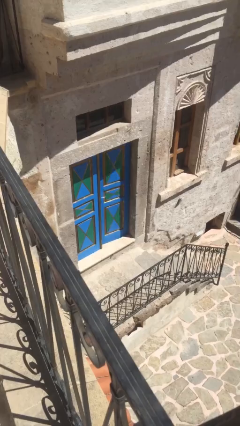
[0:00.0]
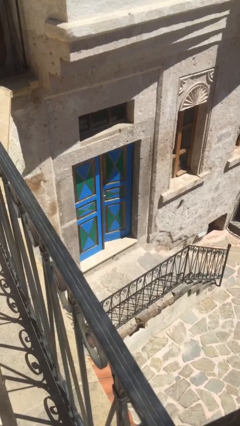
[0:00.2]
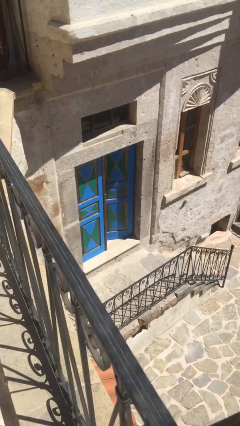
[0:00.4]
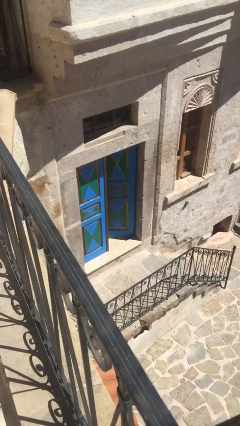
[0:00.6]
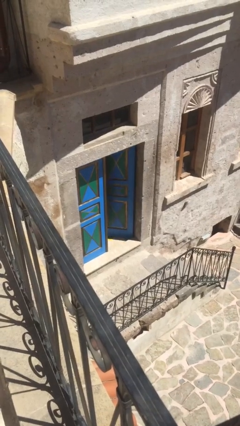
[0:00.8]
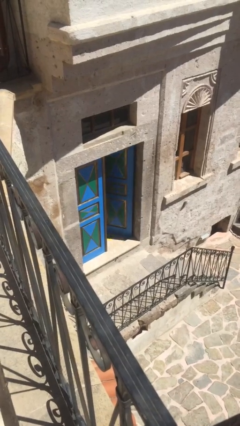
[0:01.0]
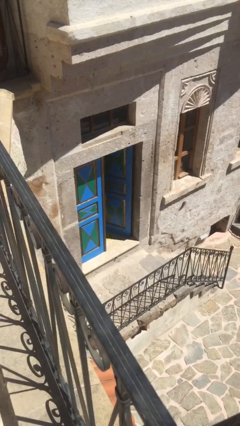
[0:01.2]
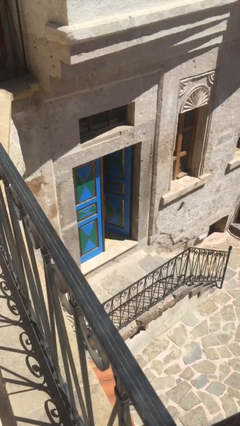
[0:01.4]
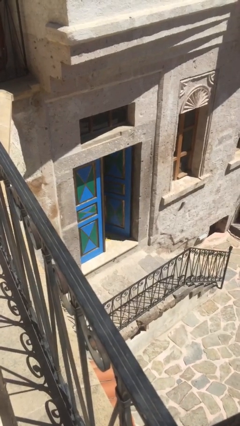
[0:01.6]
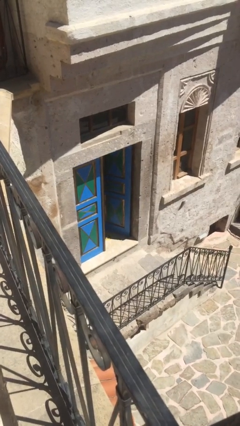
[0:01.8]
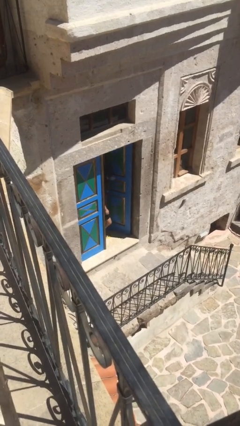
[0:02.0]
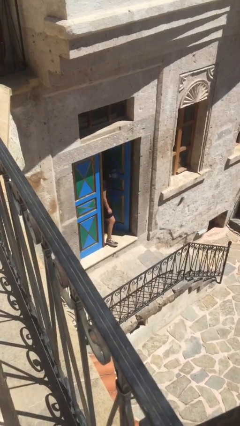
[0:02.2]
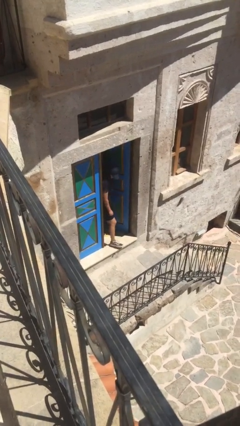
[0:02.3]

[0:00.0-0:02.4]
person opens facility door

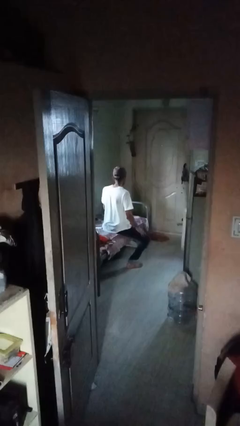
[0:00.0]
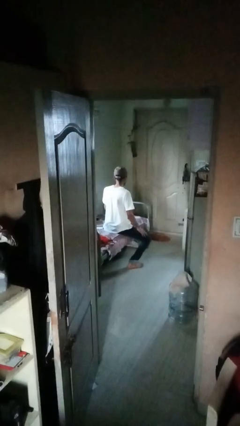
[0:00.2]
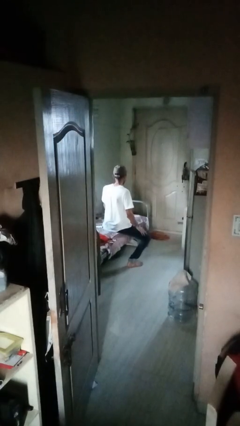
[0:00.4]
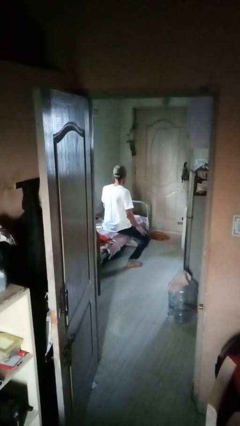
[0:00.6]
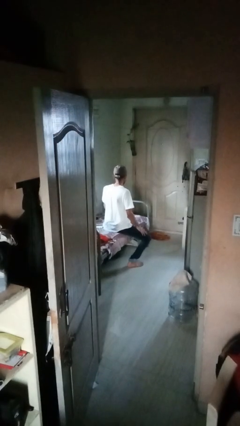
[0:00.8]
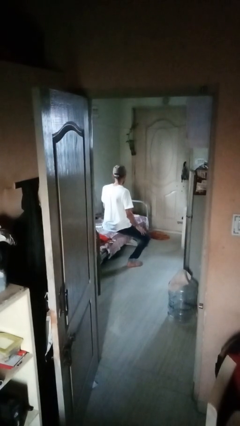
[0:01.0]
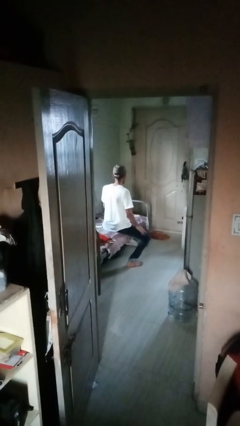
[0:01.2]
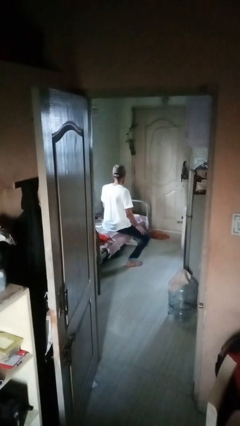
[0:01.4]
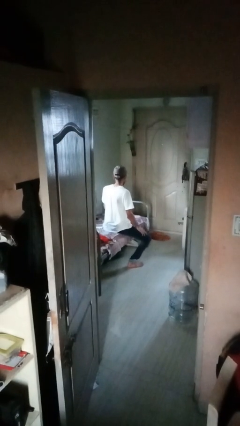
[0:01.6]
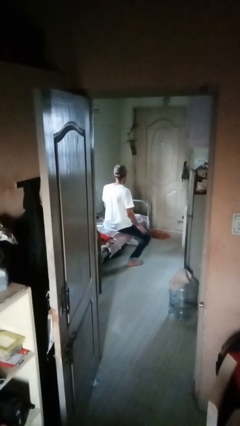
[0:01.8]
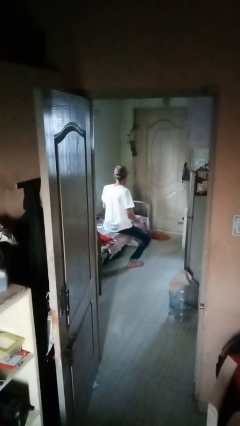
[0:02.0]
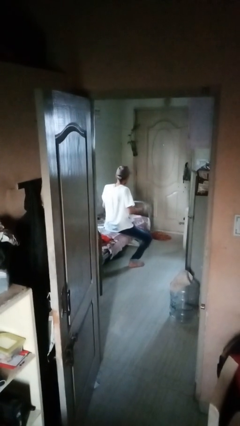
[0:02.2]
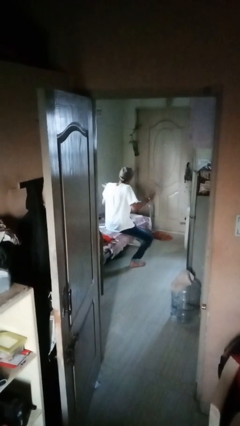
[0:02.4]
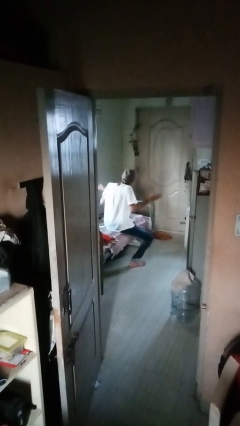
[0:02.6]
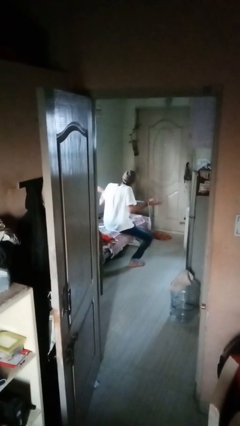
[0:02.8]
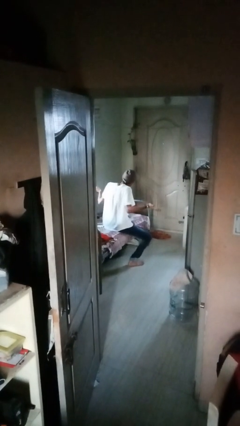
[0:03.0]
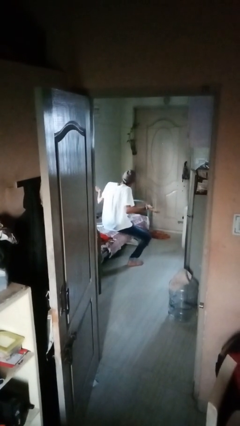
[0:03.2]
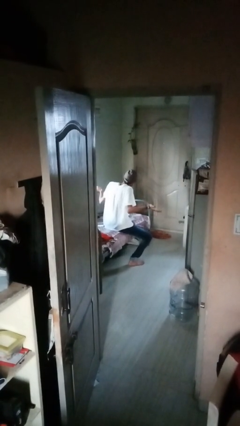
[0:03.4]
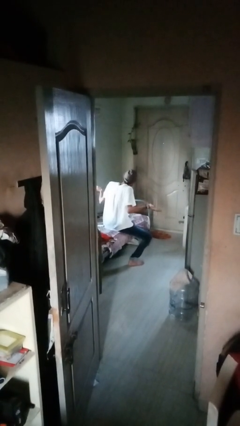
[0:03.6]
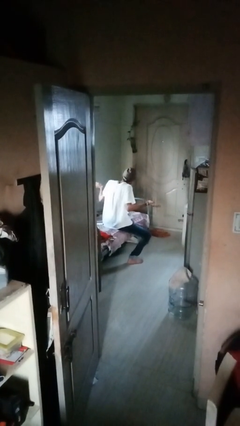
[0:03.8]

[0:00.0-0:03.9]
person shrugs

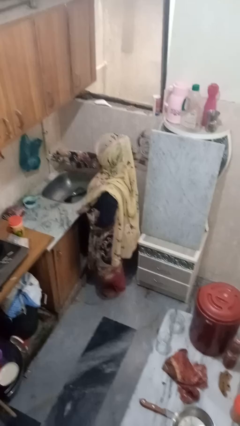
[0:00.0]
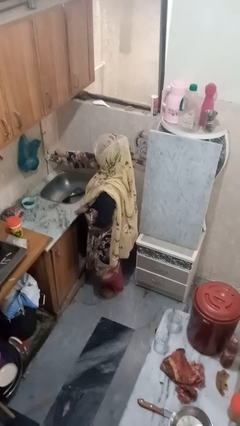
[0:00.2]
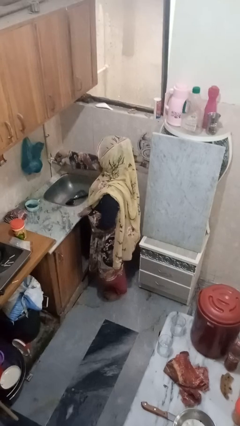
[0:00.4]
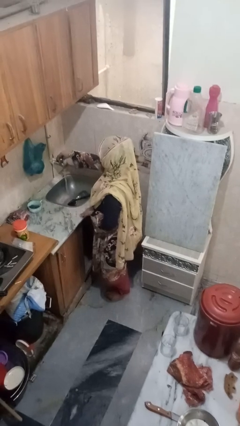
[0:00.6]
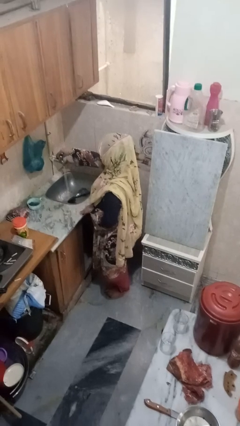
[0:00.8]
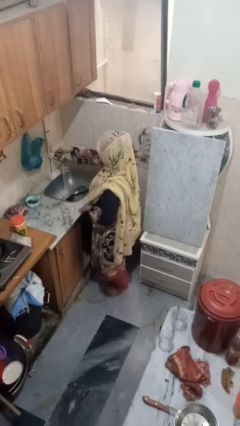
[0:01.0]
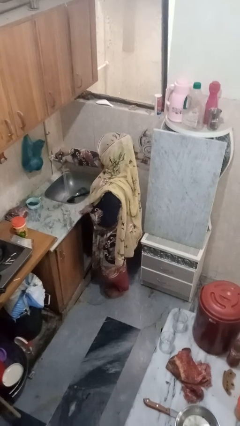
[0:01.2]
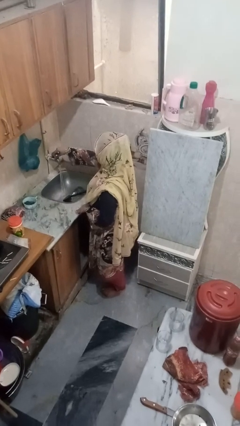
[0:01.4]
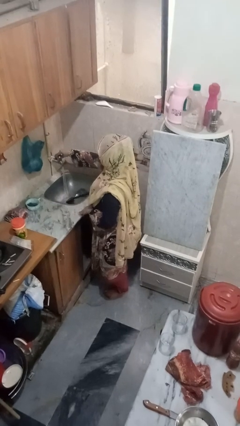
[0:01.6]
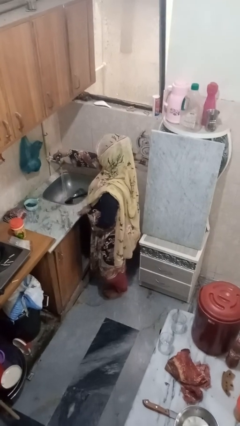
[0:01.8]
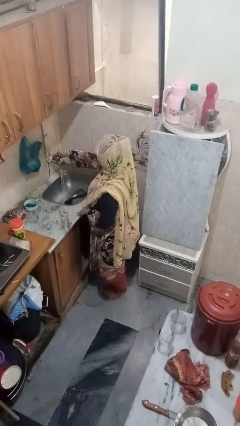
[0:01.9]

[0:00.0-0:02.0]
person turns on faucet

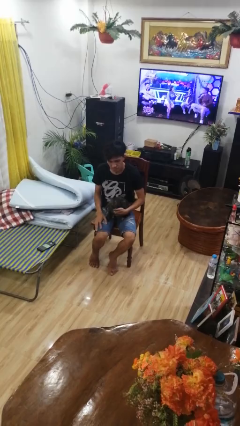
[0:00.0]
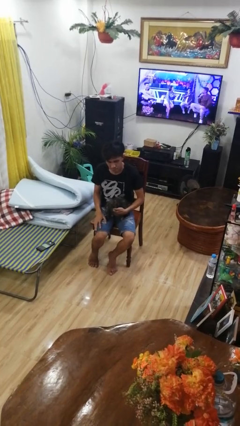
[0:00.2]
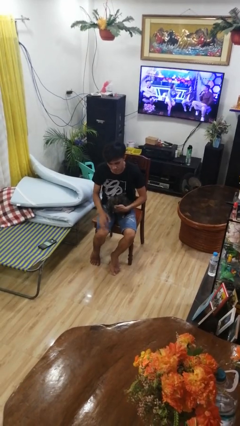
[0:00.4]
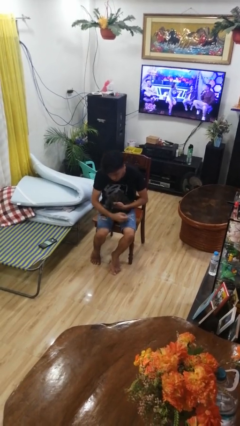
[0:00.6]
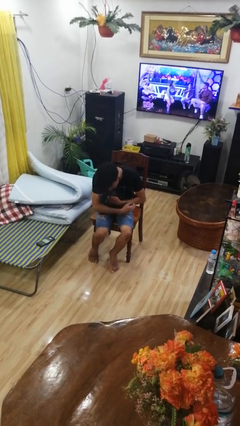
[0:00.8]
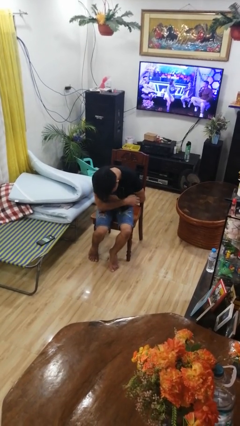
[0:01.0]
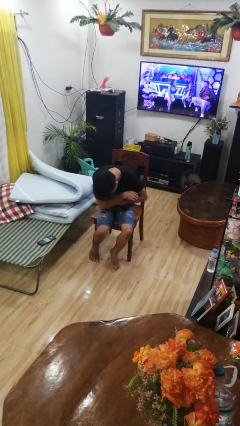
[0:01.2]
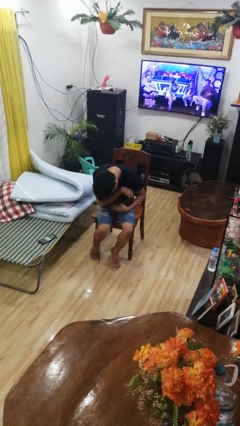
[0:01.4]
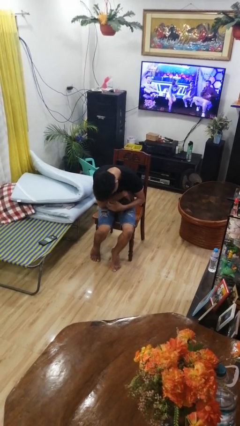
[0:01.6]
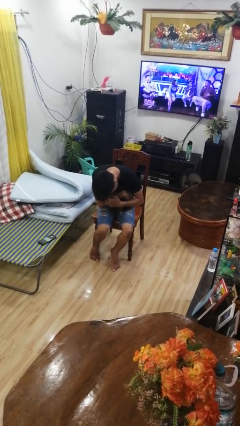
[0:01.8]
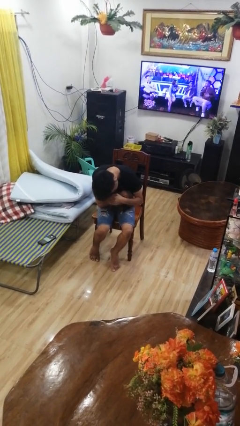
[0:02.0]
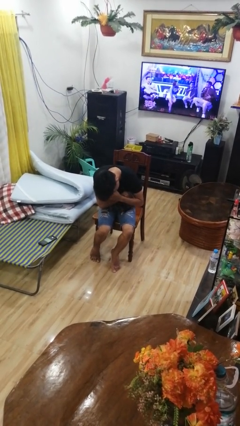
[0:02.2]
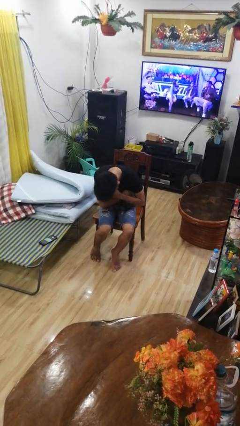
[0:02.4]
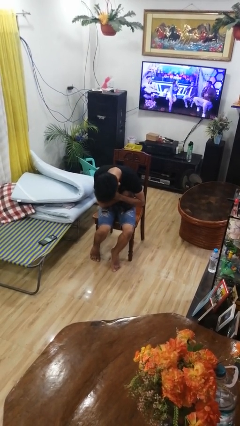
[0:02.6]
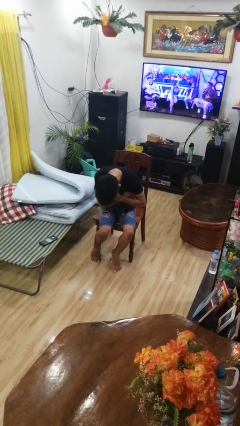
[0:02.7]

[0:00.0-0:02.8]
person hugs cat

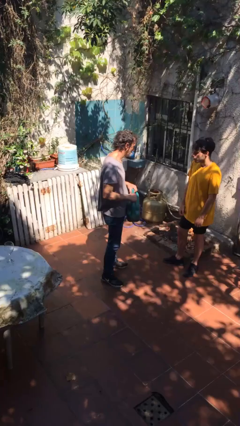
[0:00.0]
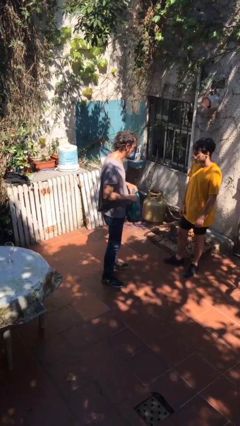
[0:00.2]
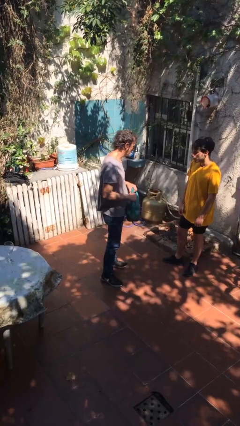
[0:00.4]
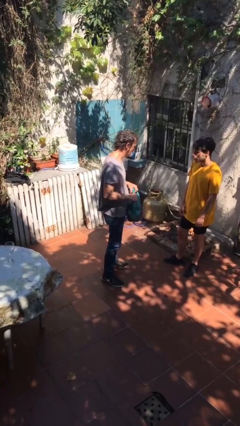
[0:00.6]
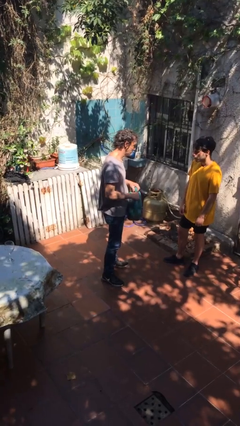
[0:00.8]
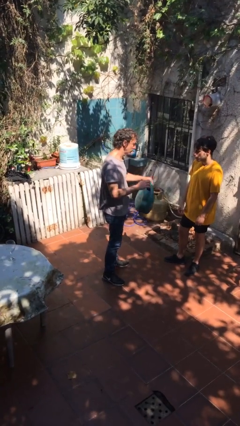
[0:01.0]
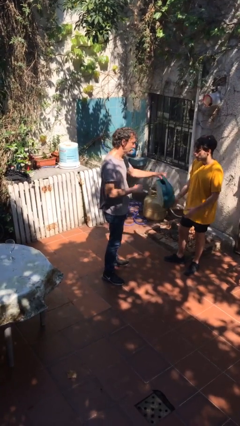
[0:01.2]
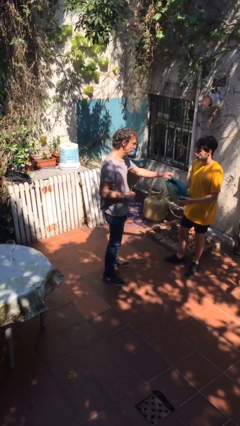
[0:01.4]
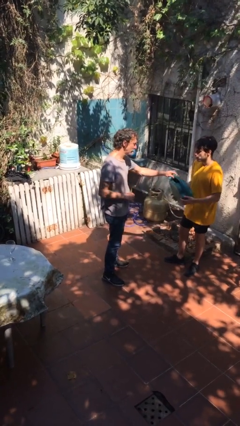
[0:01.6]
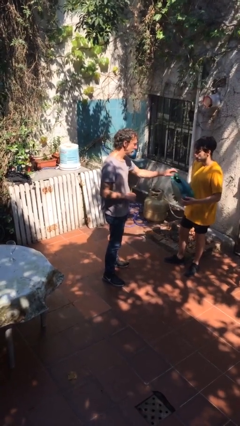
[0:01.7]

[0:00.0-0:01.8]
person transfers object to person

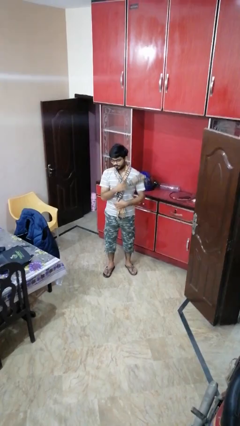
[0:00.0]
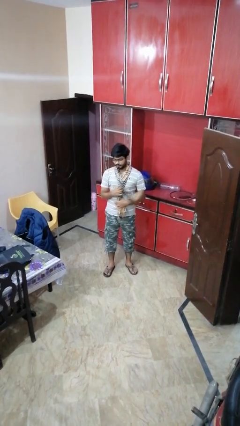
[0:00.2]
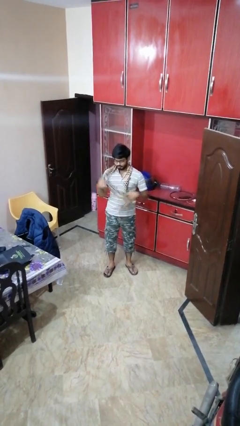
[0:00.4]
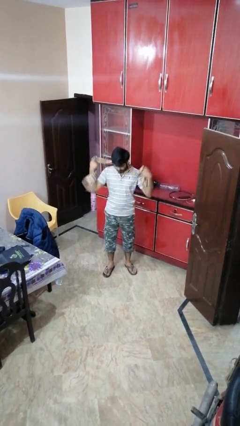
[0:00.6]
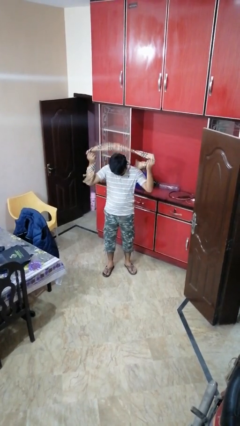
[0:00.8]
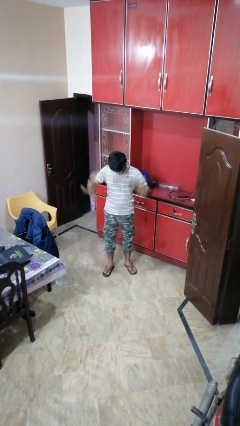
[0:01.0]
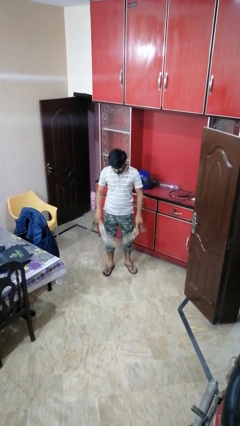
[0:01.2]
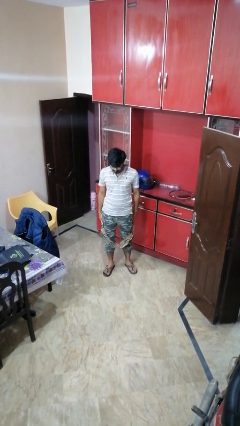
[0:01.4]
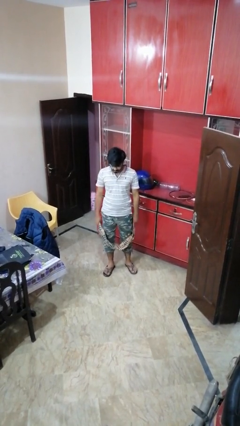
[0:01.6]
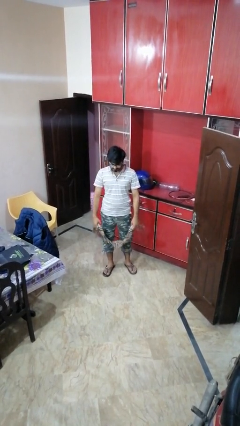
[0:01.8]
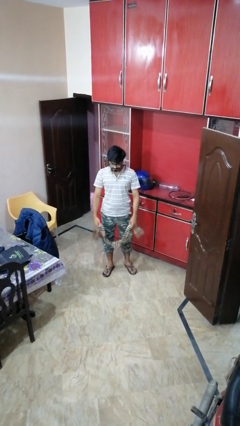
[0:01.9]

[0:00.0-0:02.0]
person takes off scarf

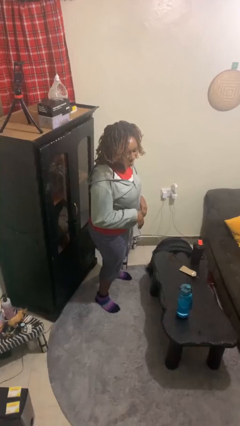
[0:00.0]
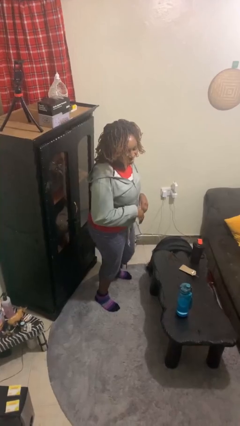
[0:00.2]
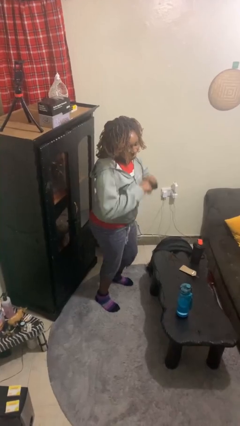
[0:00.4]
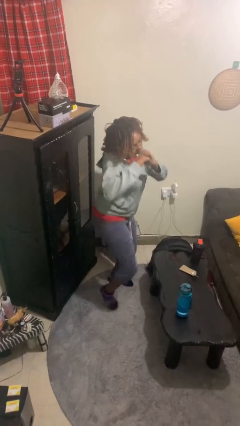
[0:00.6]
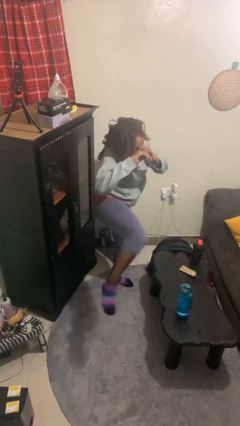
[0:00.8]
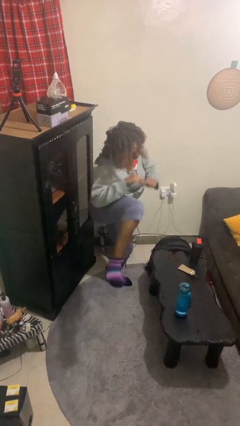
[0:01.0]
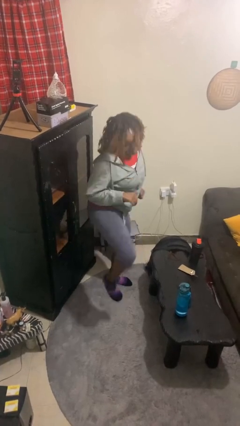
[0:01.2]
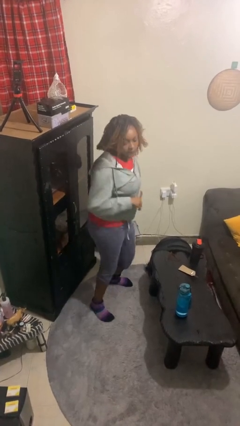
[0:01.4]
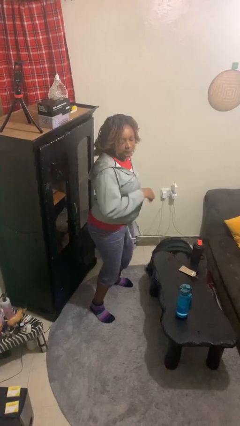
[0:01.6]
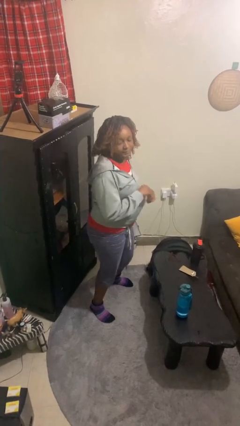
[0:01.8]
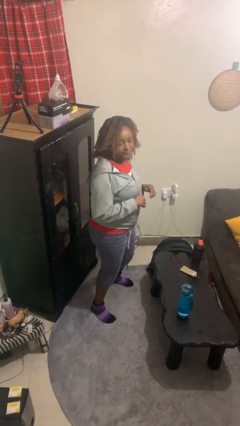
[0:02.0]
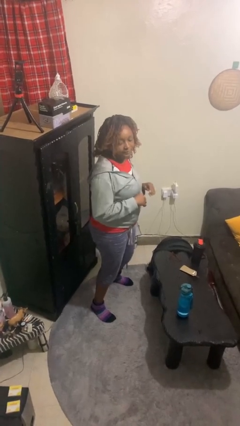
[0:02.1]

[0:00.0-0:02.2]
person karate kicks
